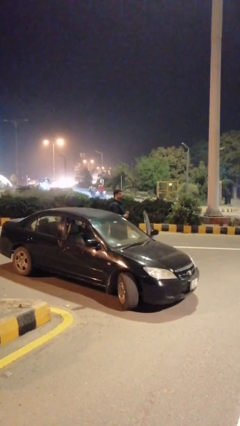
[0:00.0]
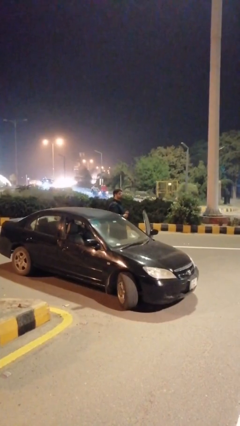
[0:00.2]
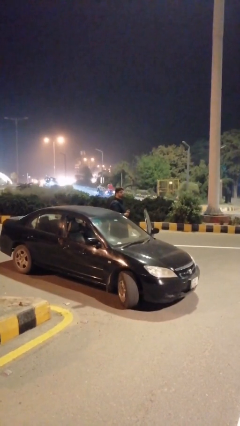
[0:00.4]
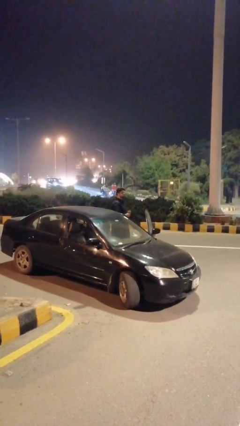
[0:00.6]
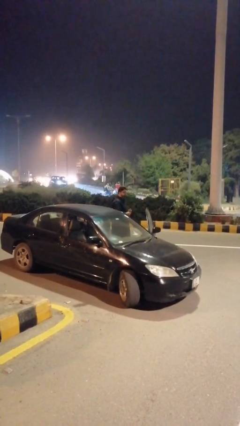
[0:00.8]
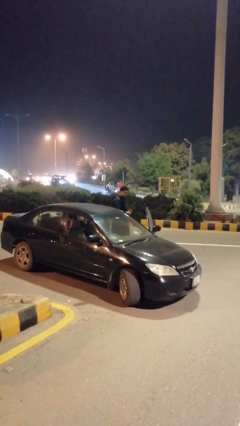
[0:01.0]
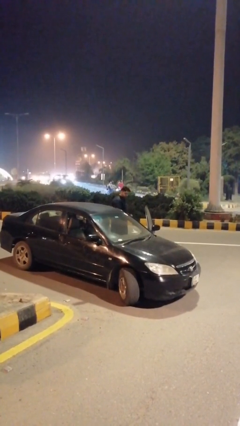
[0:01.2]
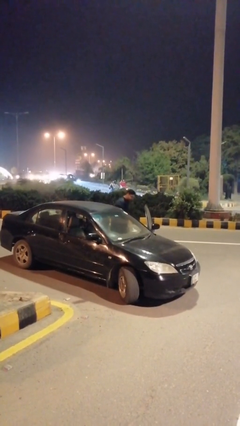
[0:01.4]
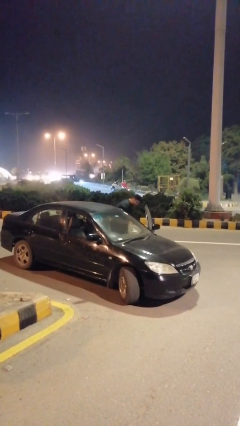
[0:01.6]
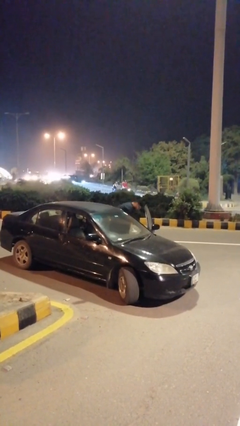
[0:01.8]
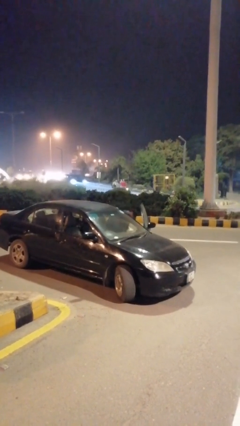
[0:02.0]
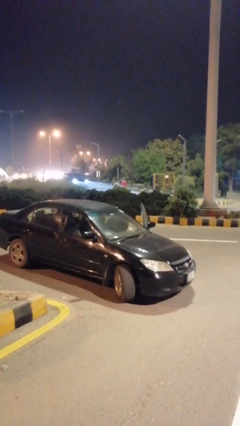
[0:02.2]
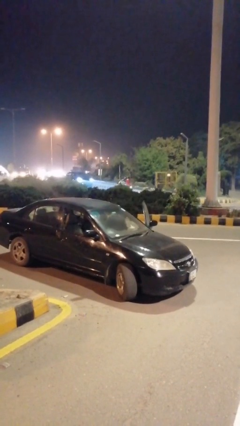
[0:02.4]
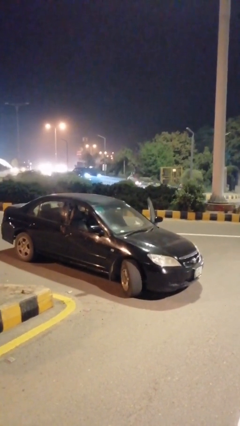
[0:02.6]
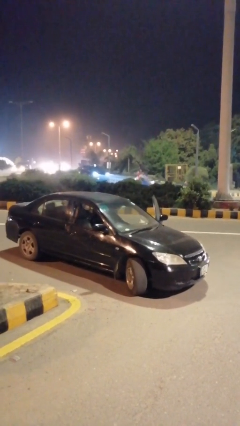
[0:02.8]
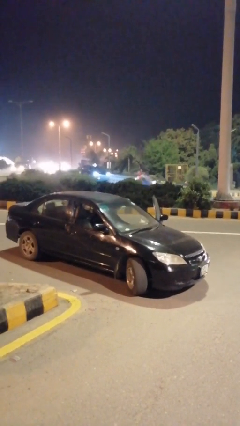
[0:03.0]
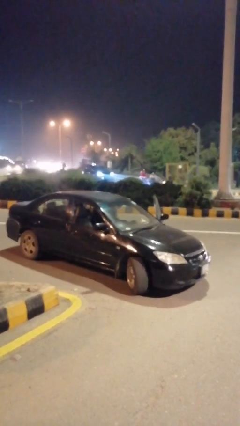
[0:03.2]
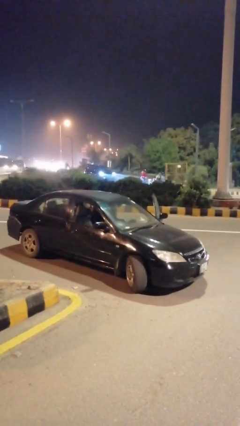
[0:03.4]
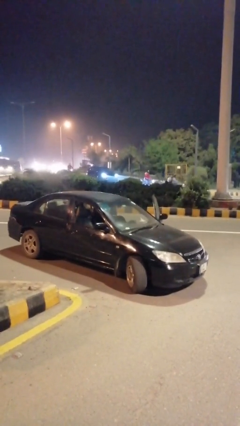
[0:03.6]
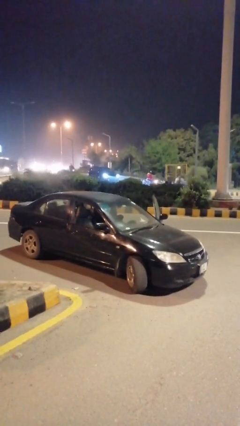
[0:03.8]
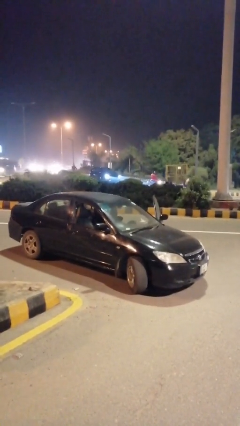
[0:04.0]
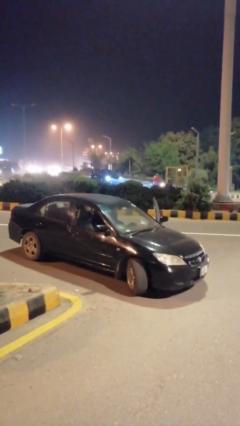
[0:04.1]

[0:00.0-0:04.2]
person enters car

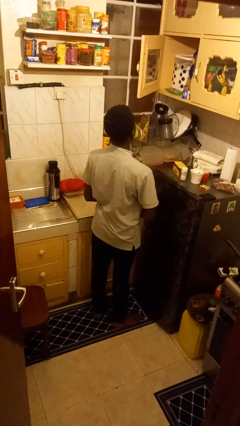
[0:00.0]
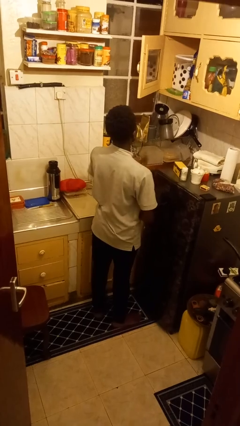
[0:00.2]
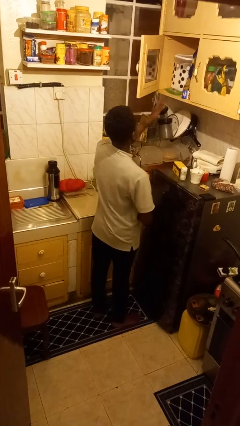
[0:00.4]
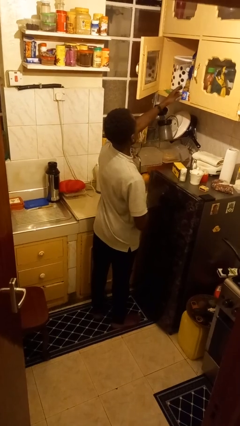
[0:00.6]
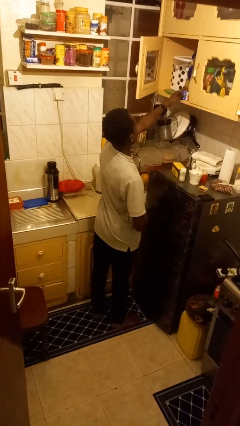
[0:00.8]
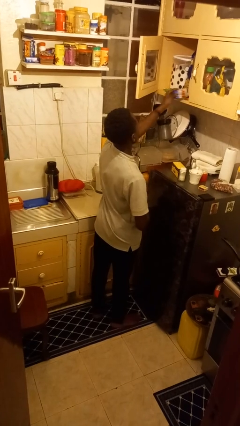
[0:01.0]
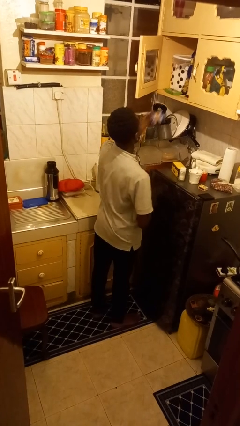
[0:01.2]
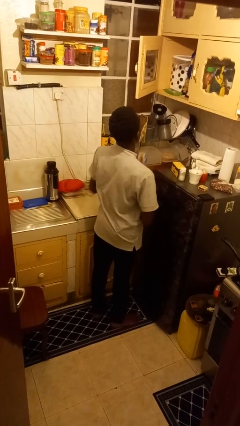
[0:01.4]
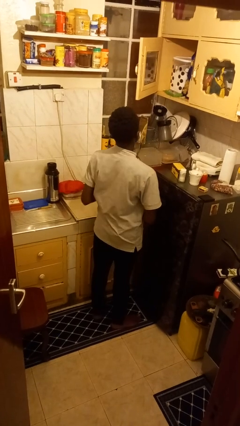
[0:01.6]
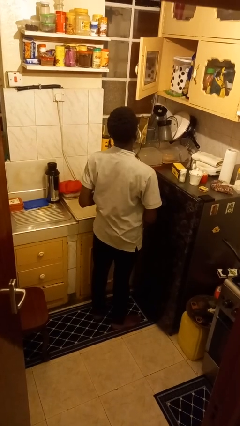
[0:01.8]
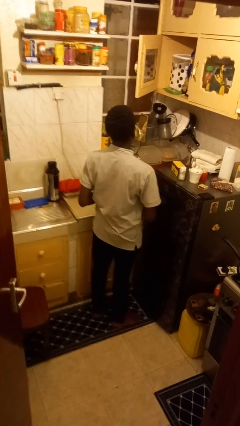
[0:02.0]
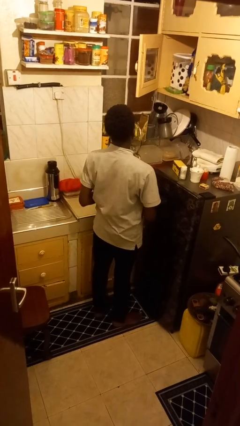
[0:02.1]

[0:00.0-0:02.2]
person picks up object from cabinet

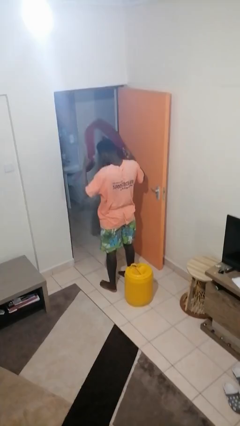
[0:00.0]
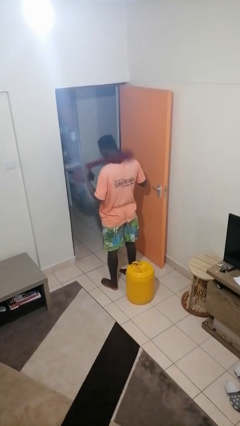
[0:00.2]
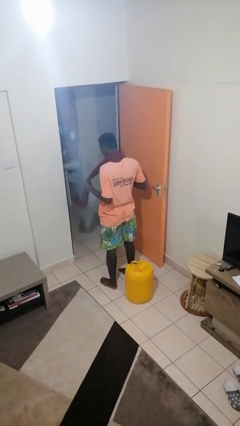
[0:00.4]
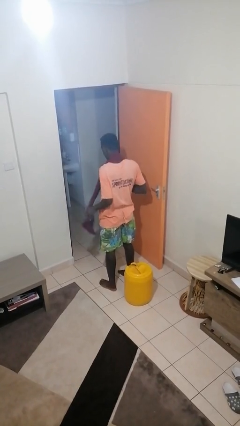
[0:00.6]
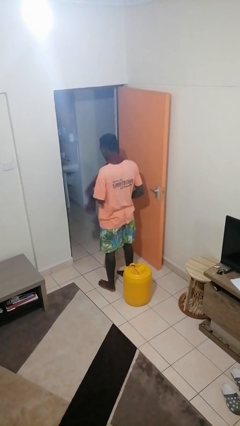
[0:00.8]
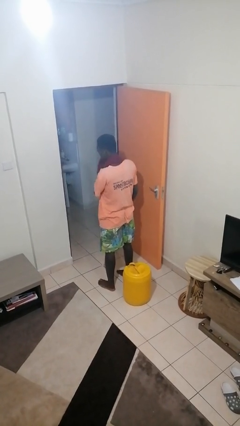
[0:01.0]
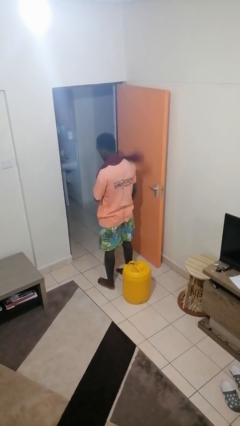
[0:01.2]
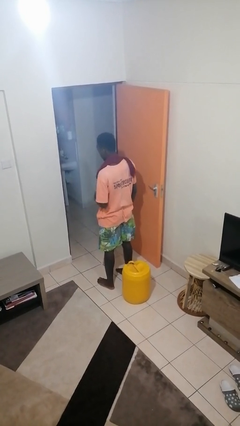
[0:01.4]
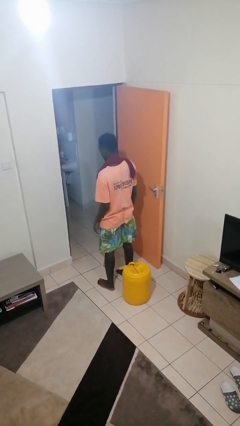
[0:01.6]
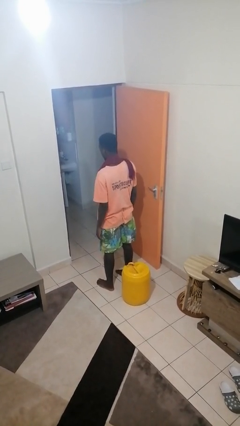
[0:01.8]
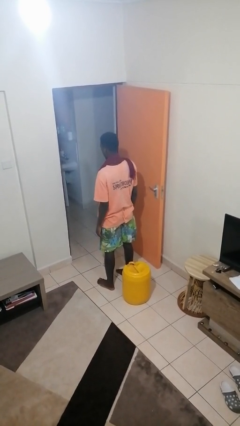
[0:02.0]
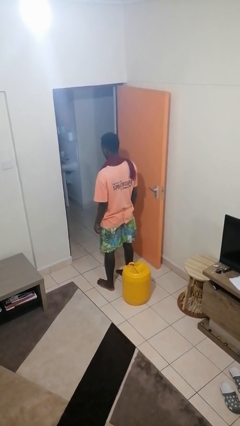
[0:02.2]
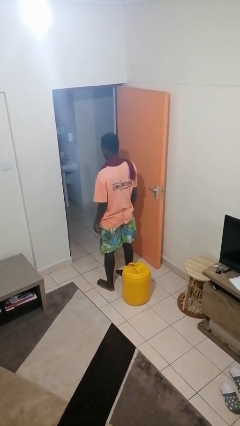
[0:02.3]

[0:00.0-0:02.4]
person puts on scarf

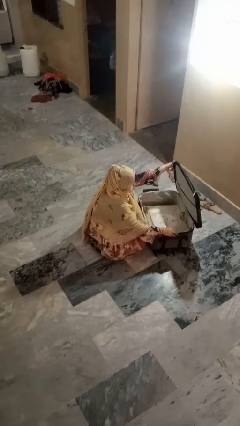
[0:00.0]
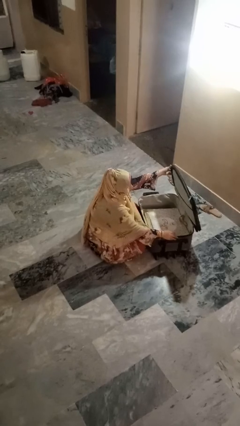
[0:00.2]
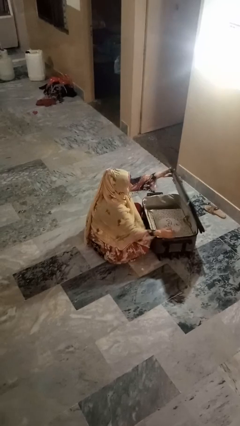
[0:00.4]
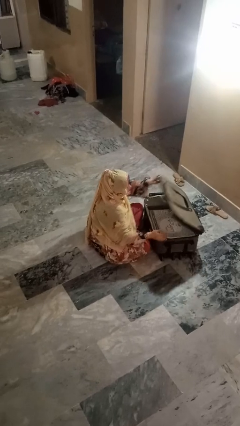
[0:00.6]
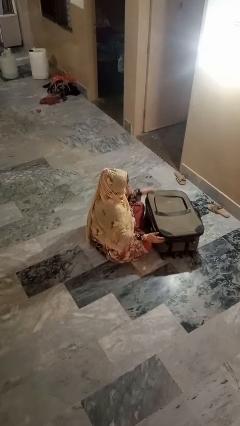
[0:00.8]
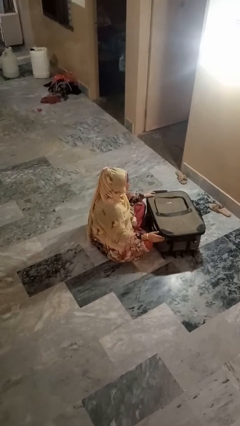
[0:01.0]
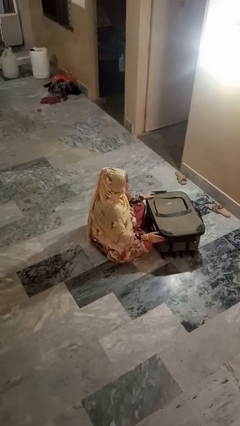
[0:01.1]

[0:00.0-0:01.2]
person closes suitcase

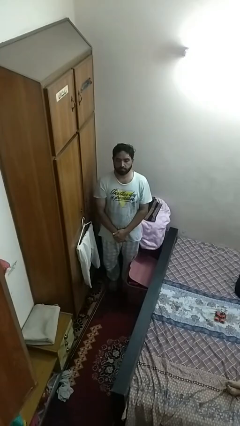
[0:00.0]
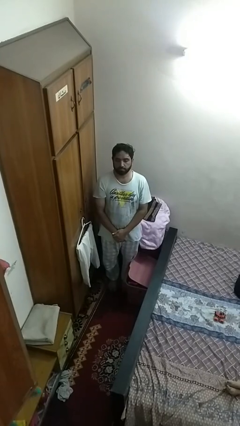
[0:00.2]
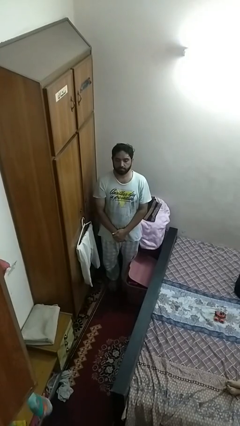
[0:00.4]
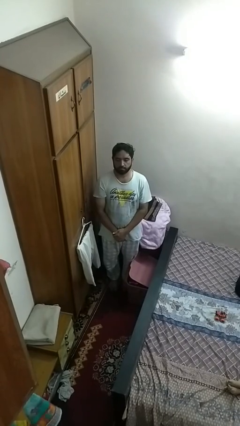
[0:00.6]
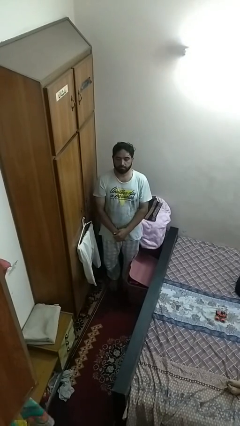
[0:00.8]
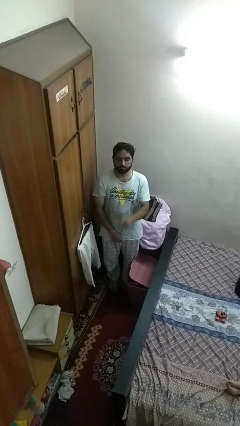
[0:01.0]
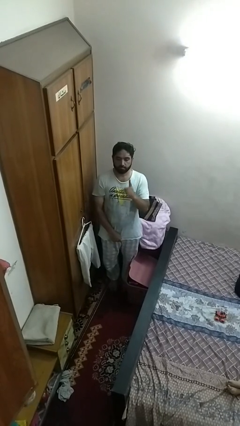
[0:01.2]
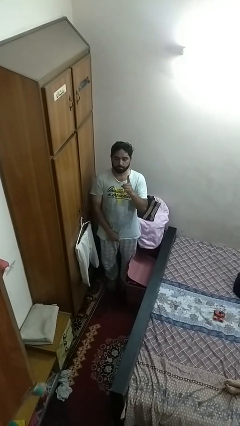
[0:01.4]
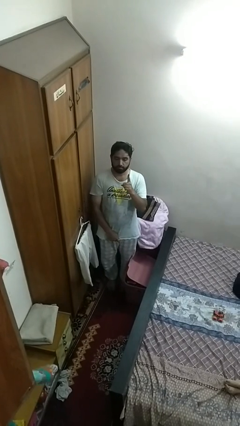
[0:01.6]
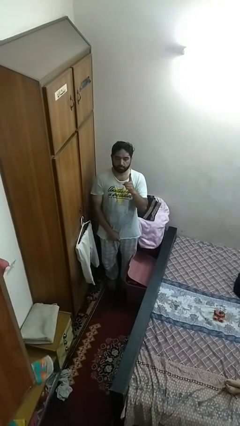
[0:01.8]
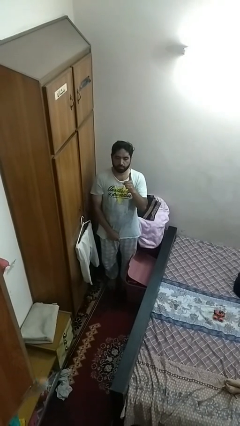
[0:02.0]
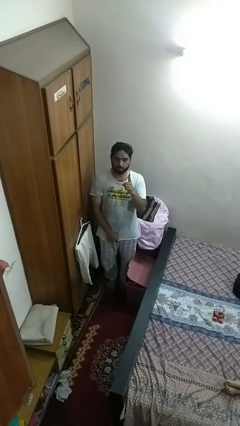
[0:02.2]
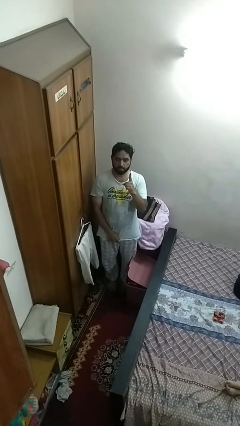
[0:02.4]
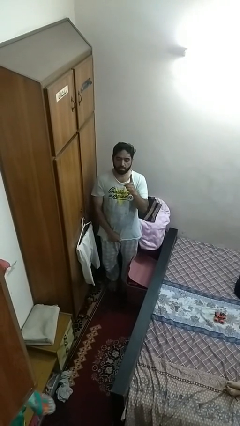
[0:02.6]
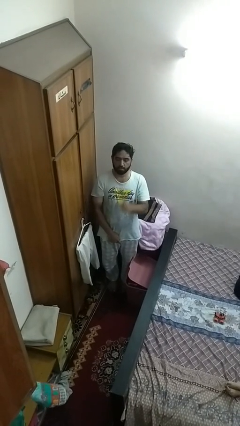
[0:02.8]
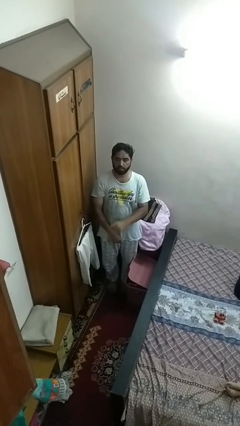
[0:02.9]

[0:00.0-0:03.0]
person gestures number one

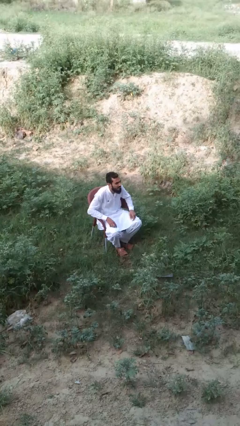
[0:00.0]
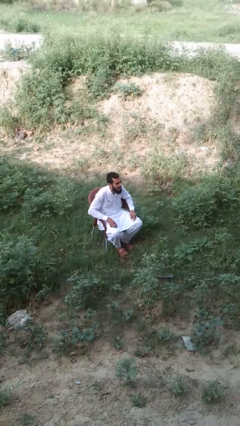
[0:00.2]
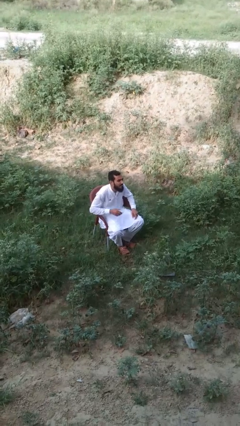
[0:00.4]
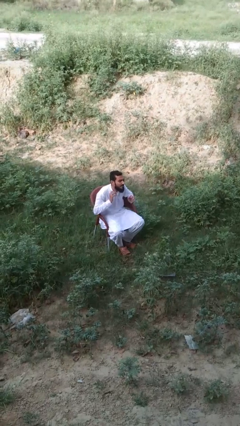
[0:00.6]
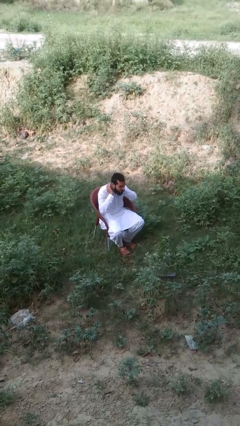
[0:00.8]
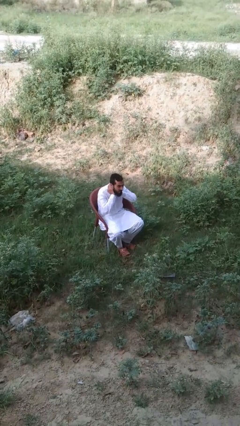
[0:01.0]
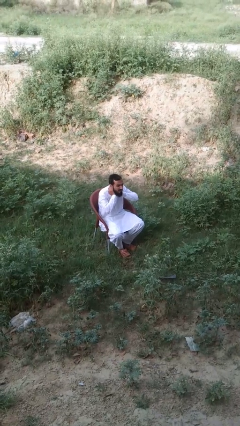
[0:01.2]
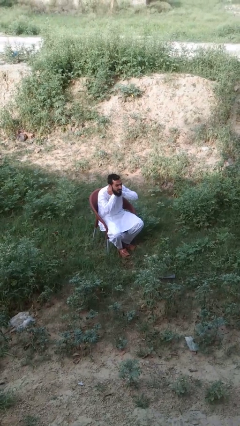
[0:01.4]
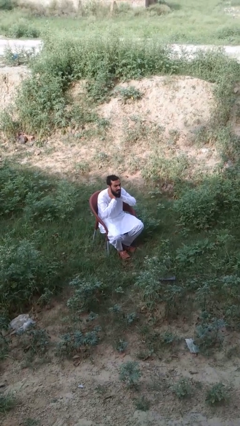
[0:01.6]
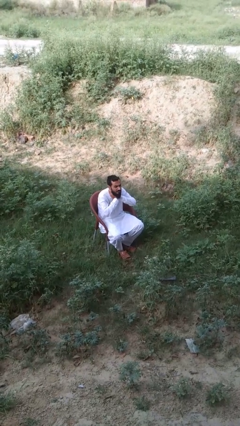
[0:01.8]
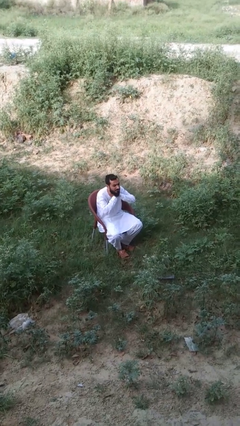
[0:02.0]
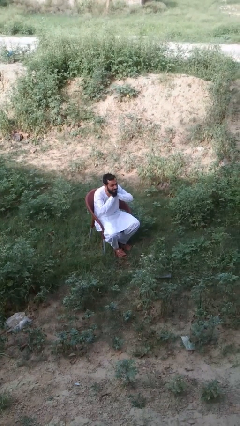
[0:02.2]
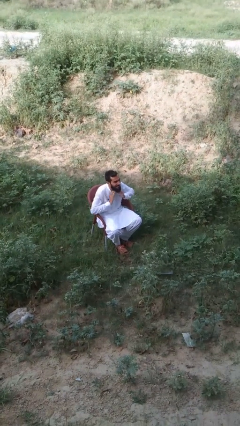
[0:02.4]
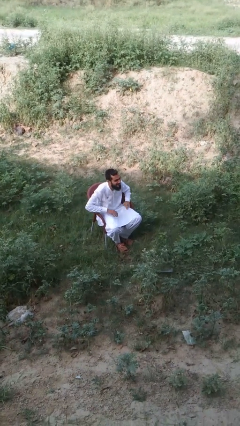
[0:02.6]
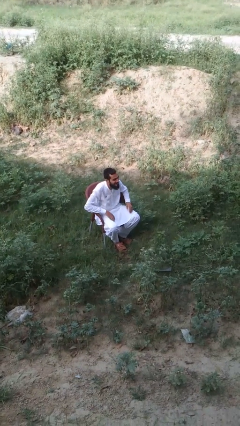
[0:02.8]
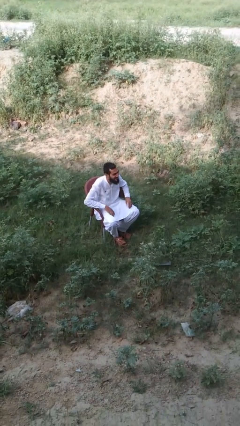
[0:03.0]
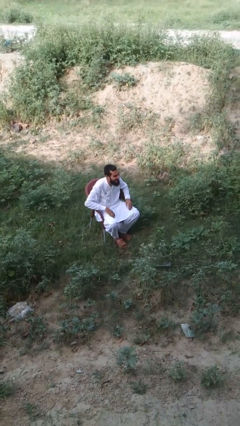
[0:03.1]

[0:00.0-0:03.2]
person rubs neck

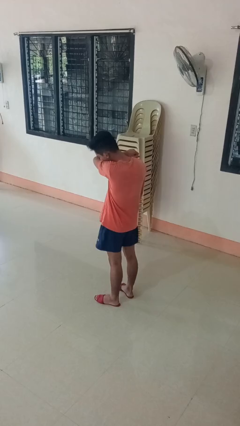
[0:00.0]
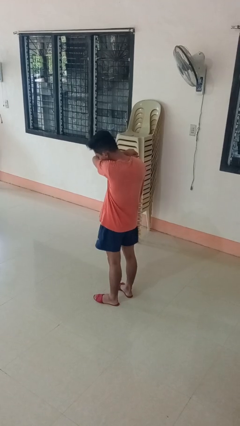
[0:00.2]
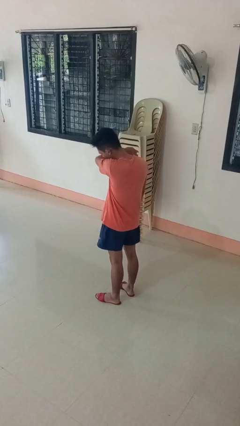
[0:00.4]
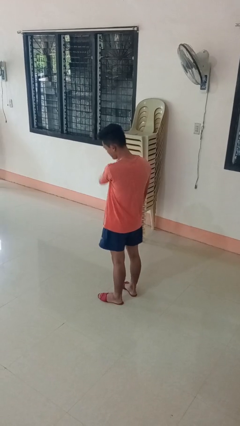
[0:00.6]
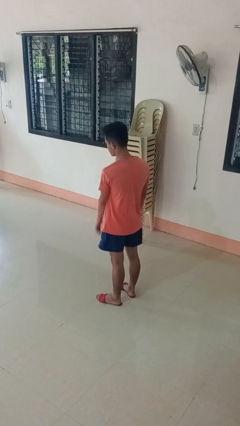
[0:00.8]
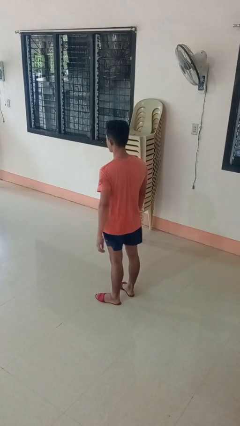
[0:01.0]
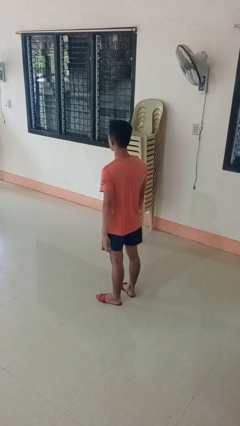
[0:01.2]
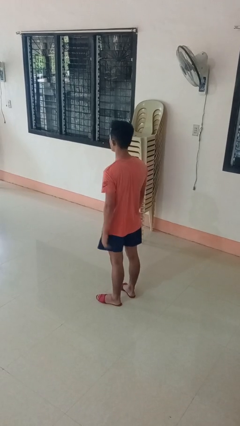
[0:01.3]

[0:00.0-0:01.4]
person sneezes into arm
